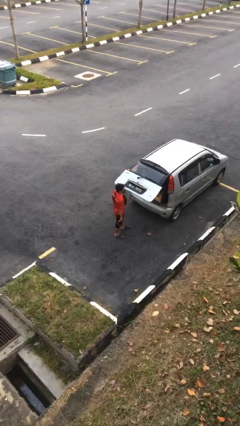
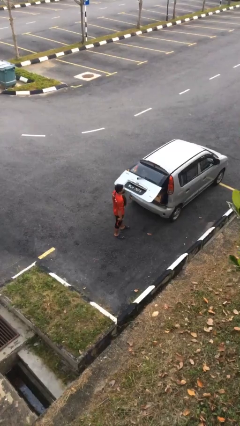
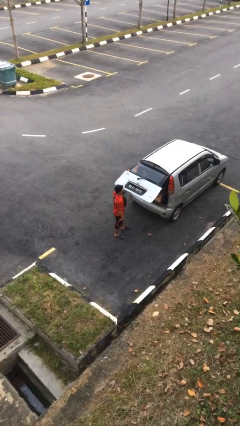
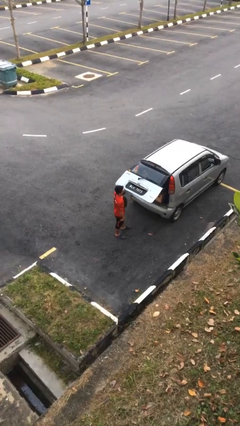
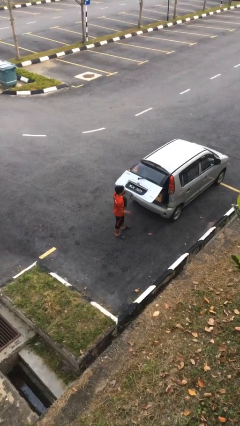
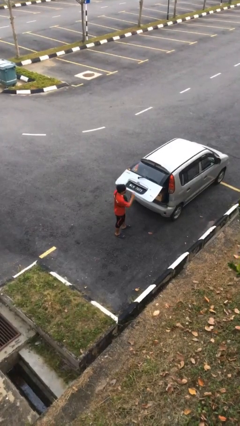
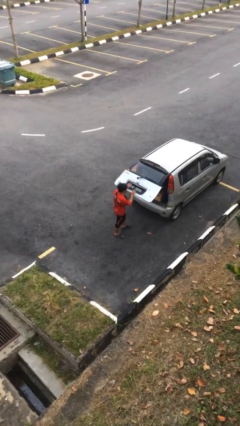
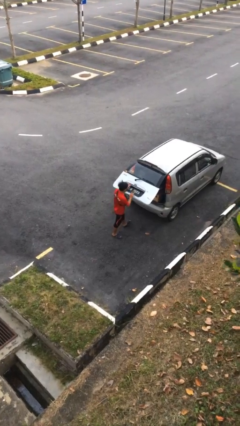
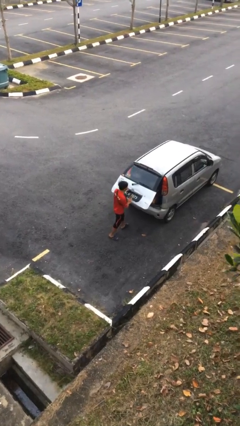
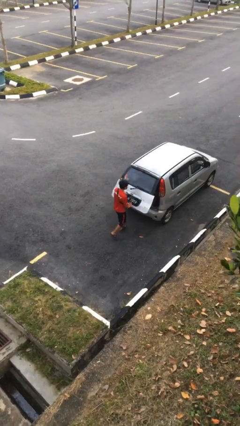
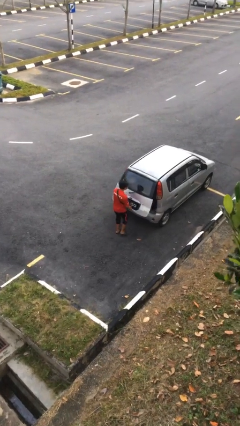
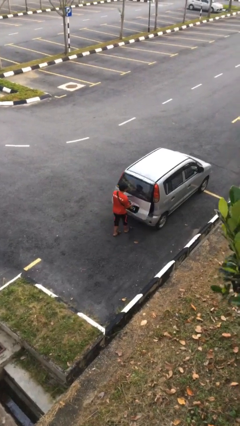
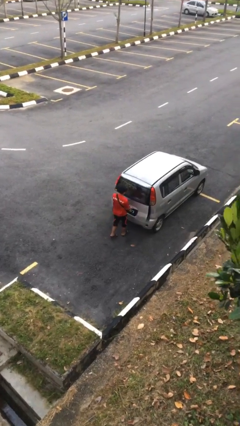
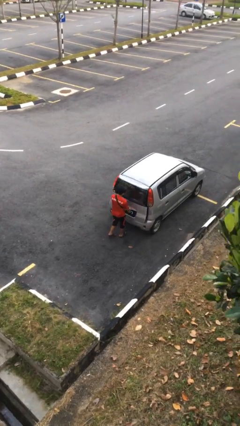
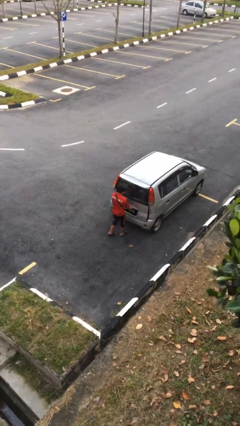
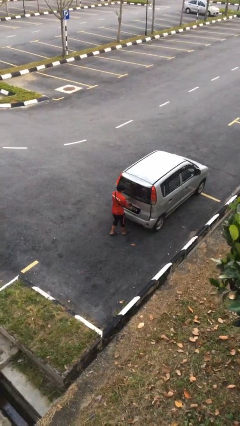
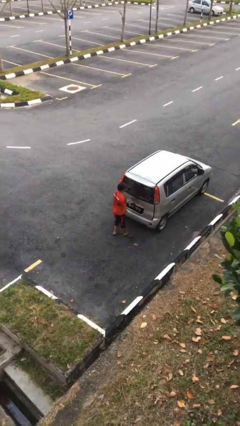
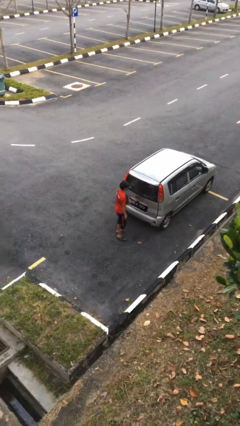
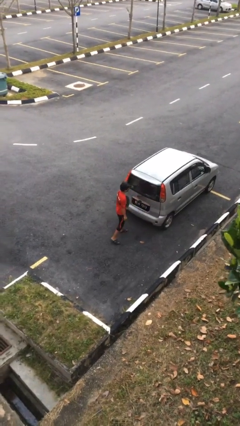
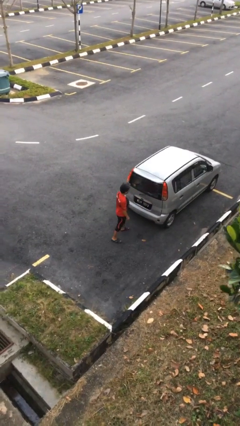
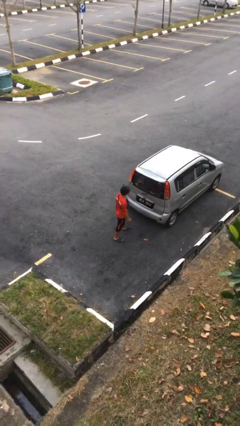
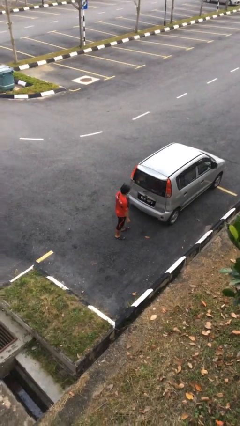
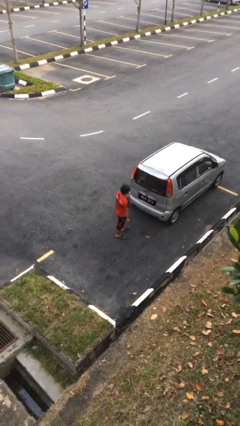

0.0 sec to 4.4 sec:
person closes car trunk

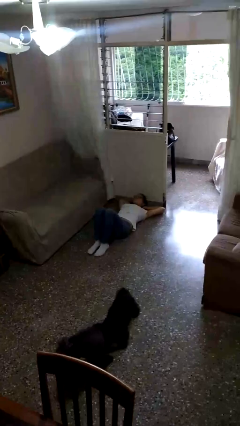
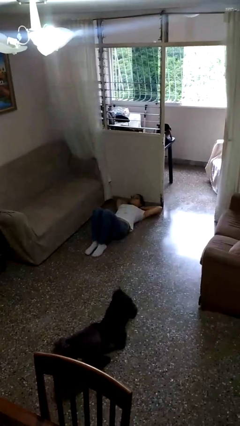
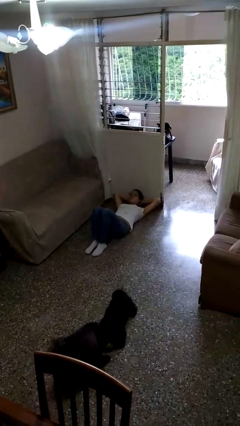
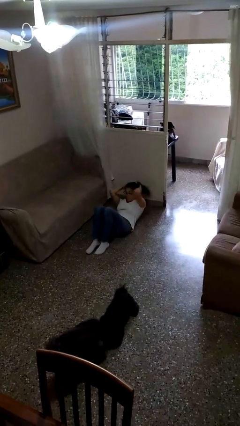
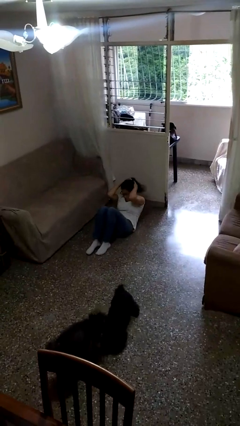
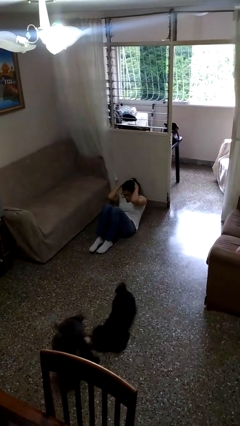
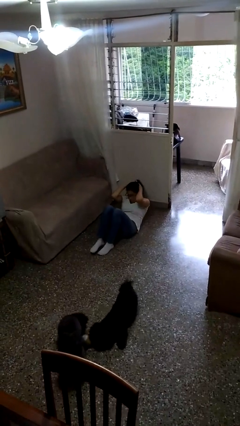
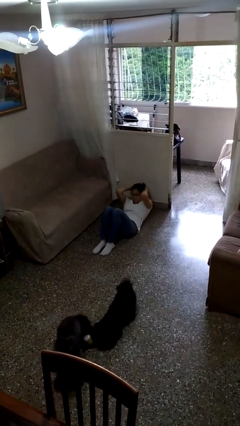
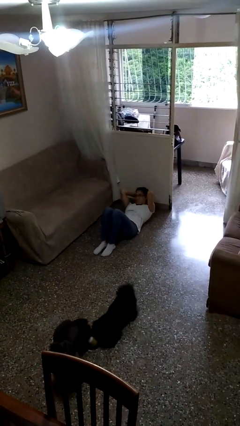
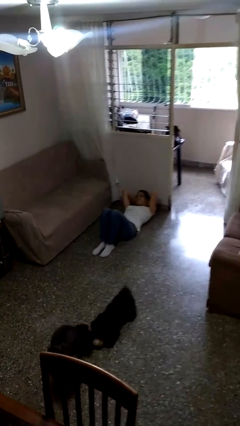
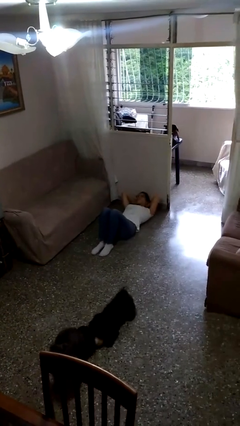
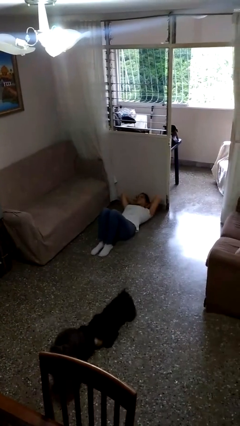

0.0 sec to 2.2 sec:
person exercises with situp

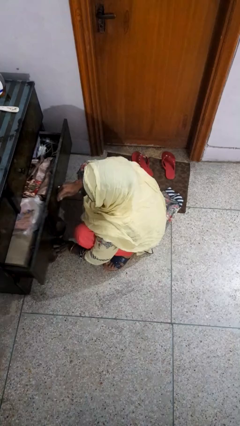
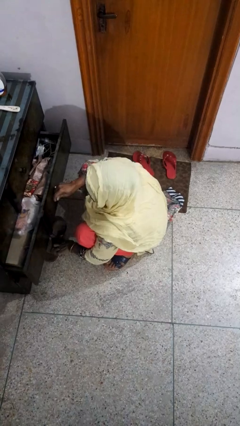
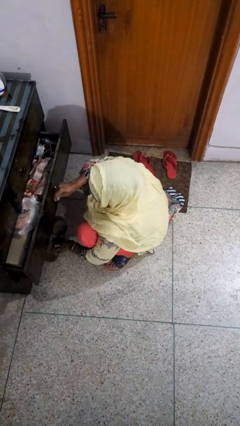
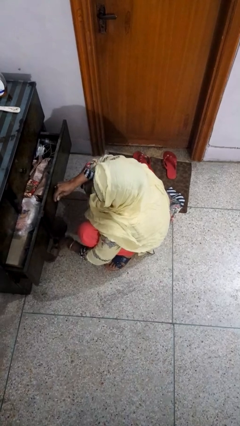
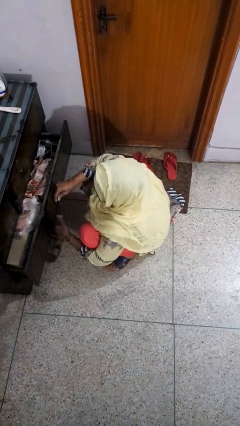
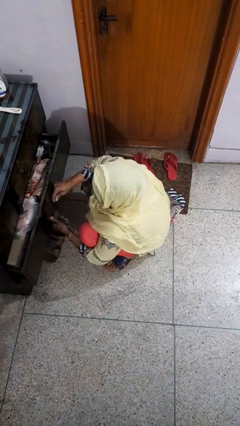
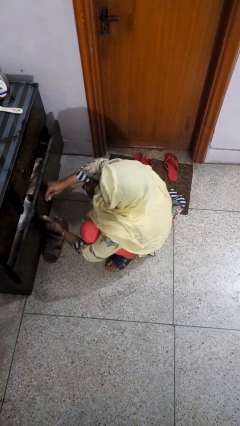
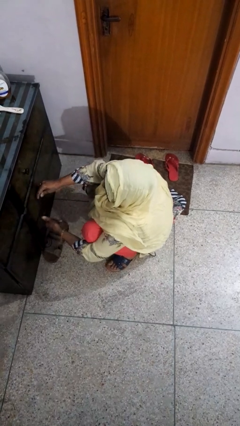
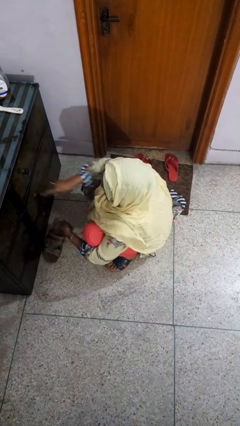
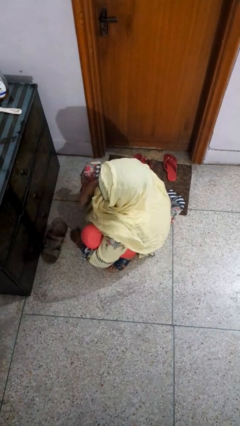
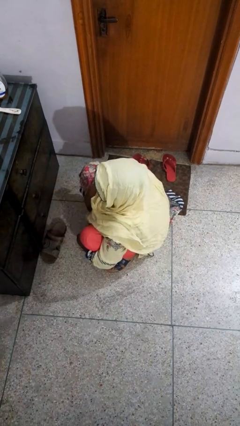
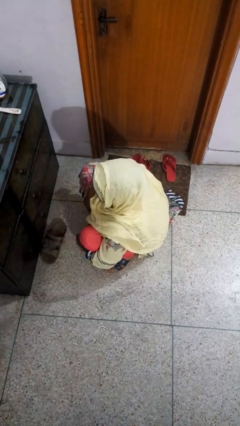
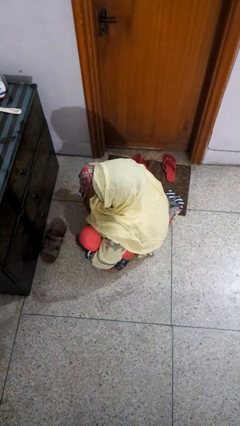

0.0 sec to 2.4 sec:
person closes dresser drawer

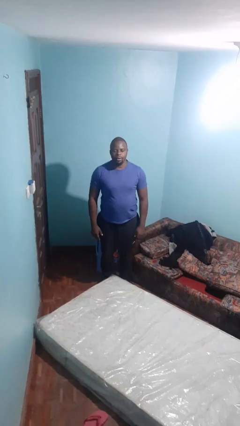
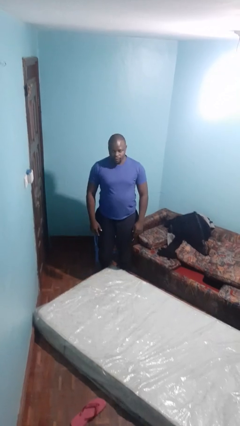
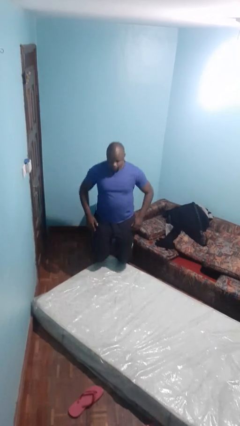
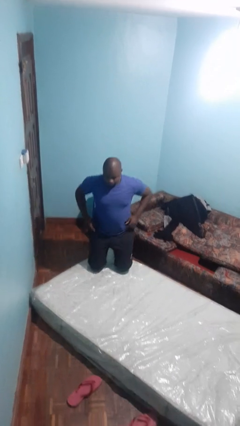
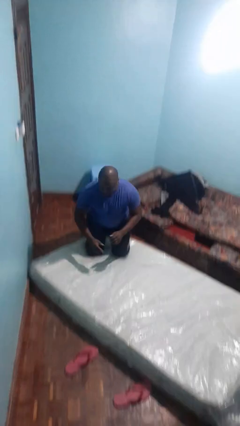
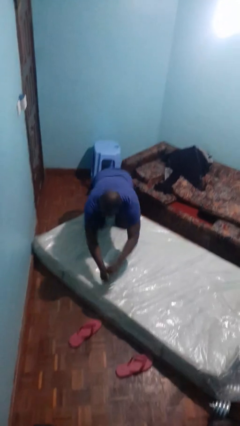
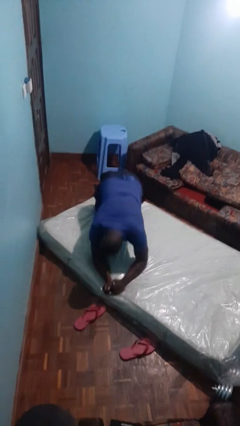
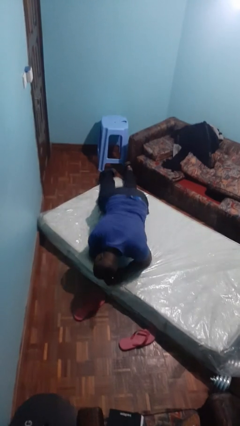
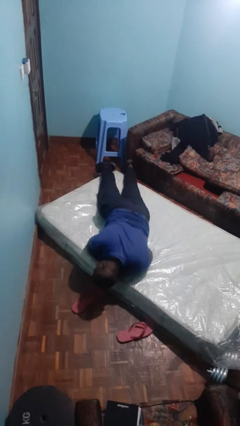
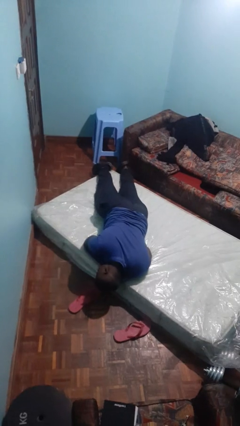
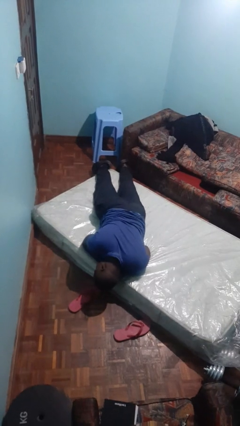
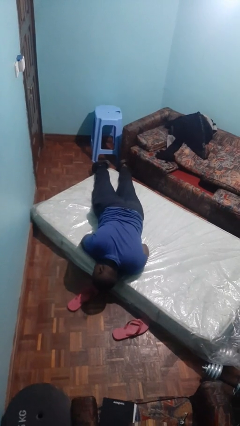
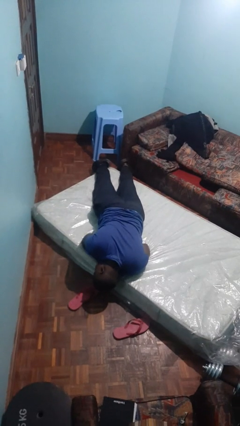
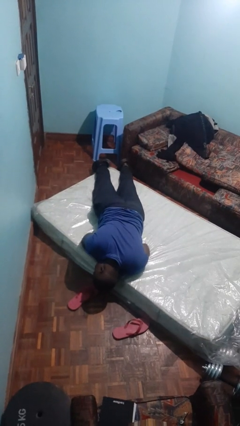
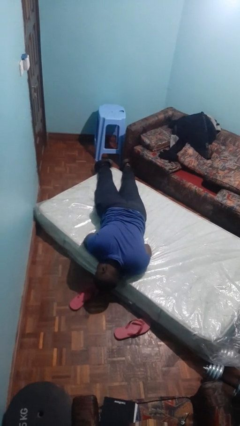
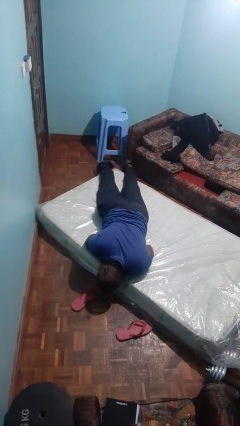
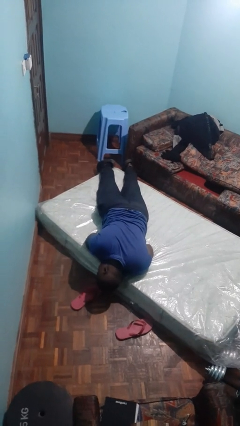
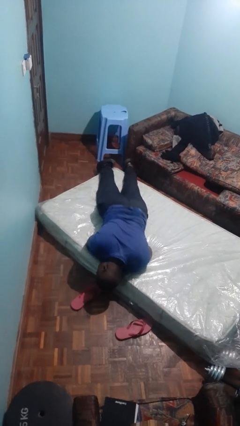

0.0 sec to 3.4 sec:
person lies down on bed

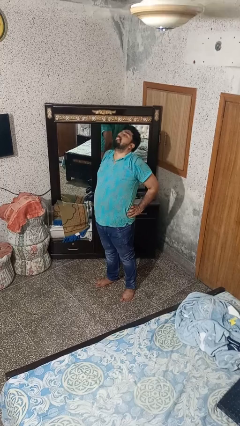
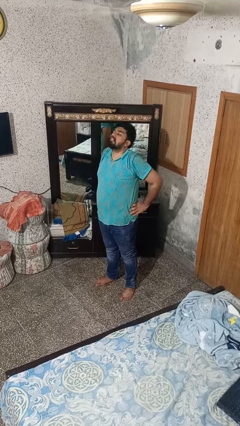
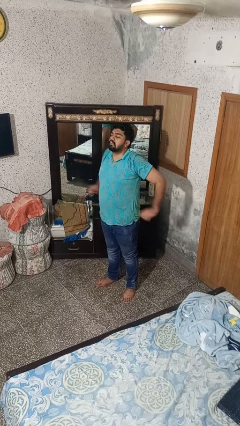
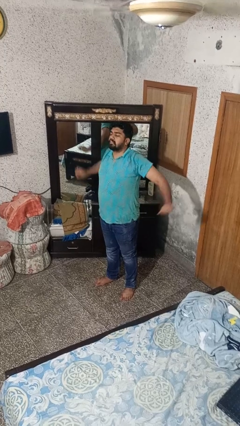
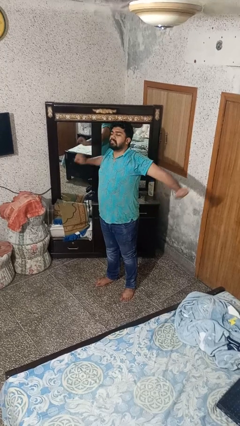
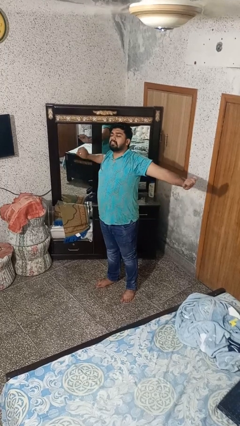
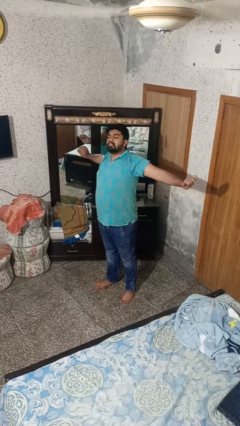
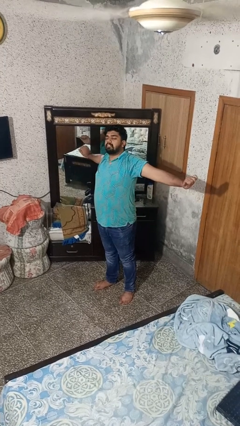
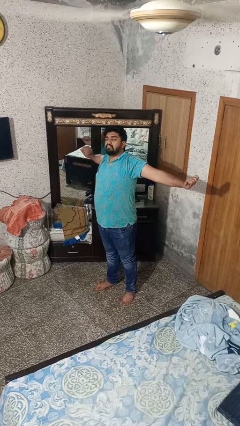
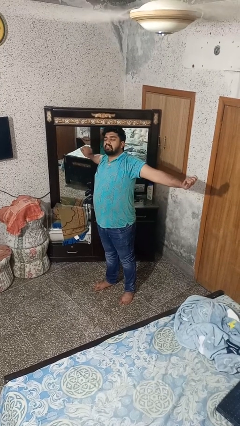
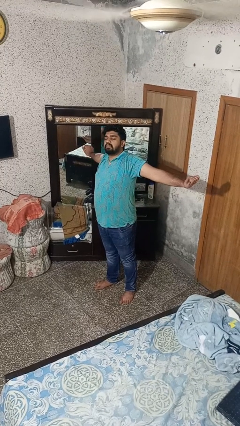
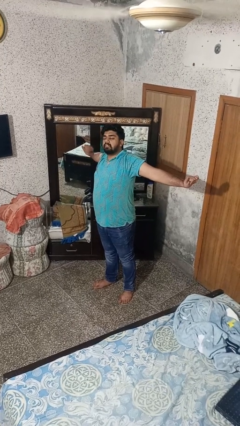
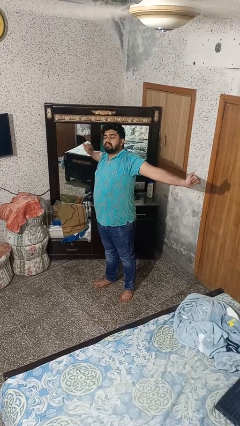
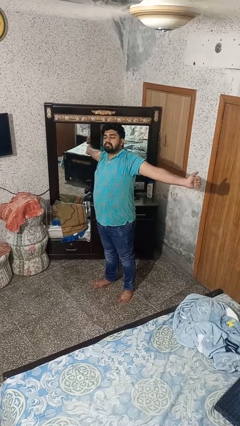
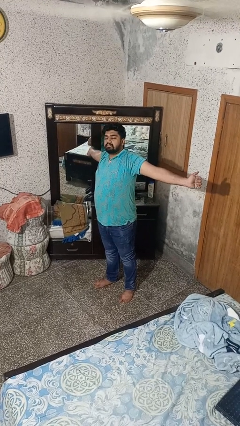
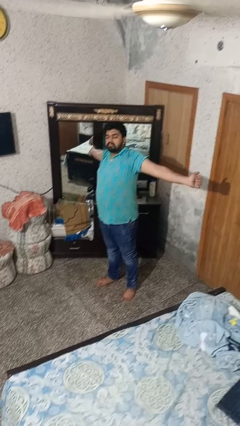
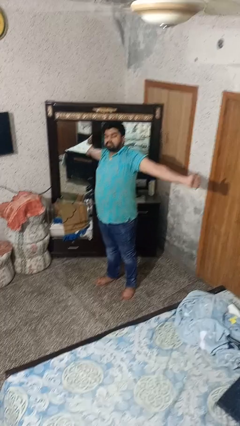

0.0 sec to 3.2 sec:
person stretches arms to side

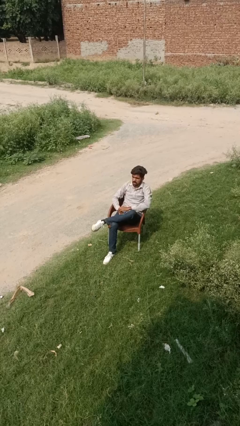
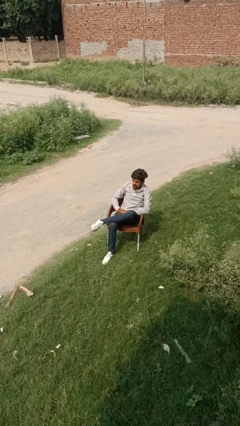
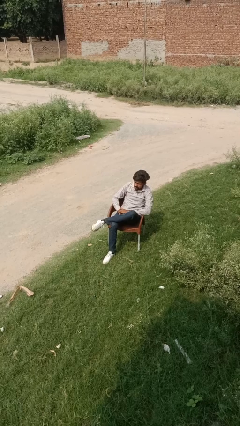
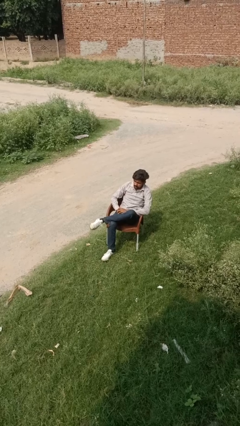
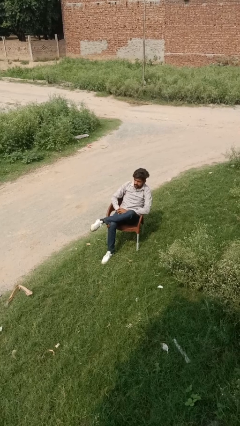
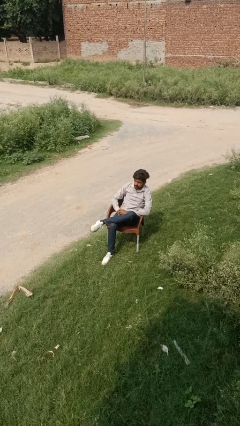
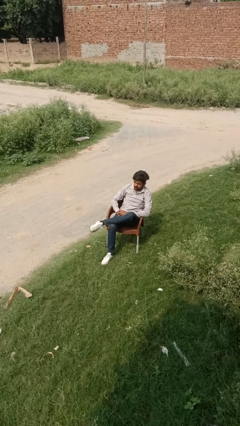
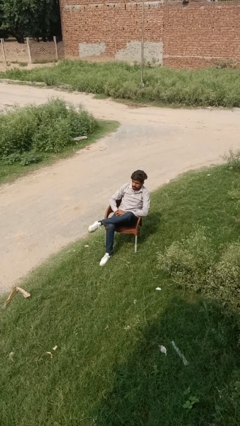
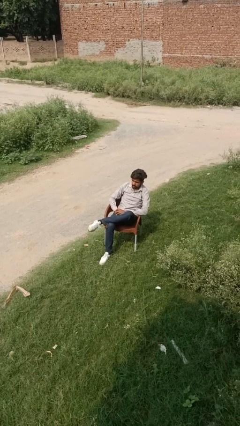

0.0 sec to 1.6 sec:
person gestures lower hand

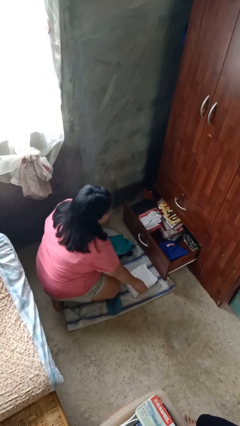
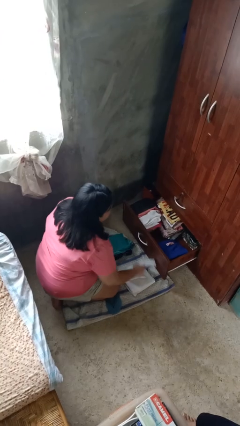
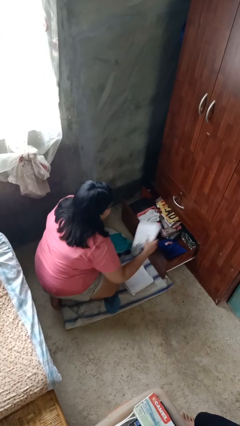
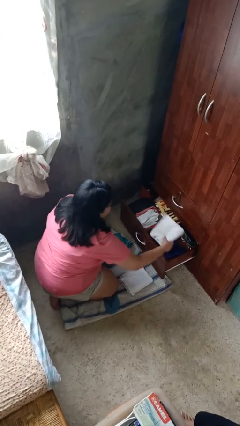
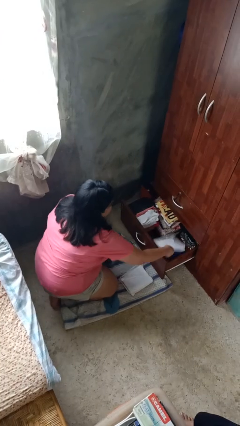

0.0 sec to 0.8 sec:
person puts clothes into dresser
